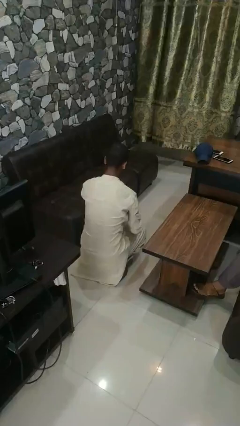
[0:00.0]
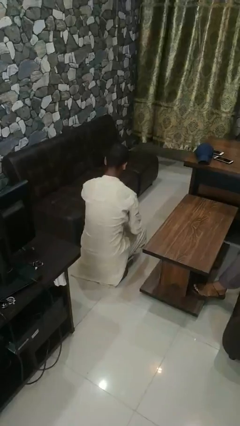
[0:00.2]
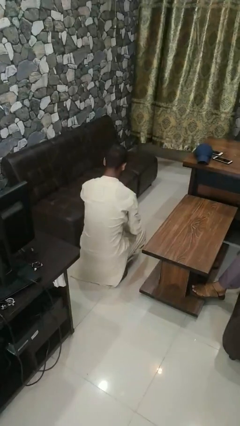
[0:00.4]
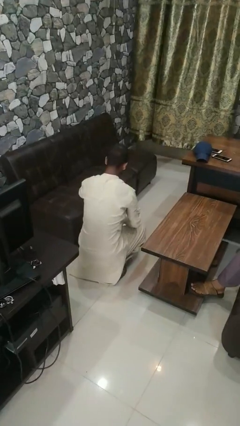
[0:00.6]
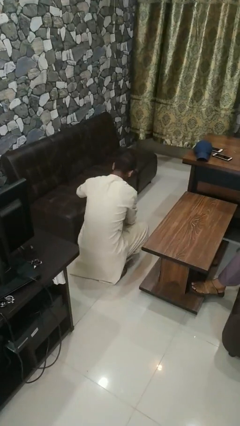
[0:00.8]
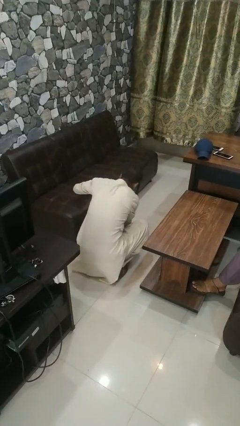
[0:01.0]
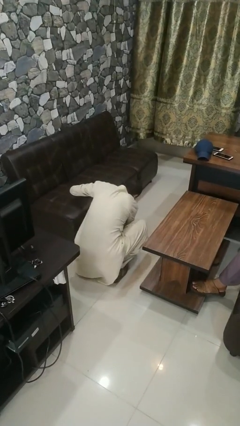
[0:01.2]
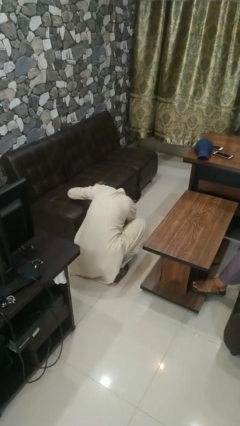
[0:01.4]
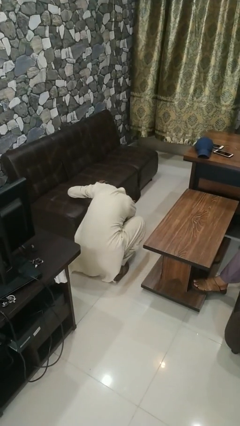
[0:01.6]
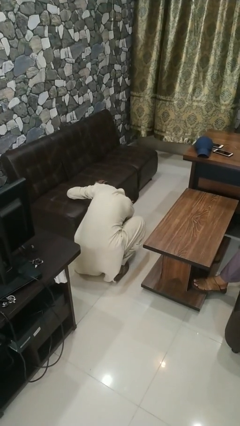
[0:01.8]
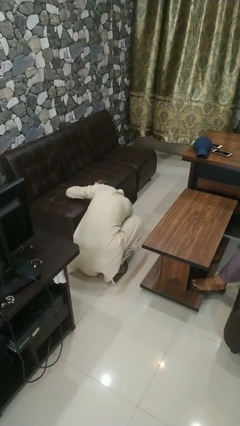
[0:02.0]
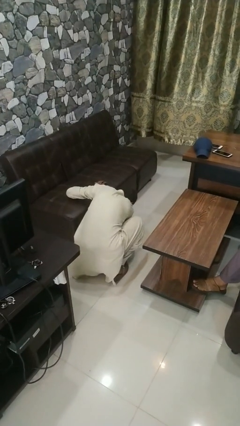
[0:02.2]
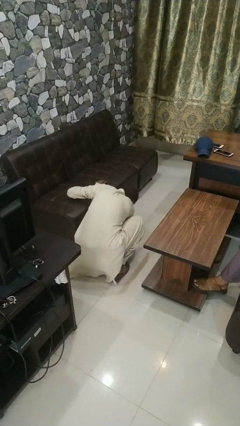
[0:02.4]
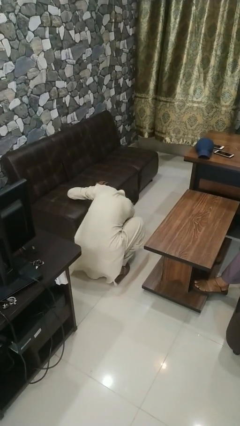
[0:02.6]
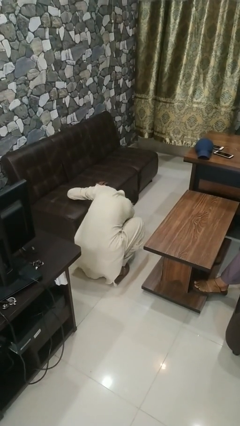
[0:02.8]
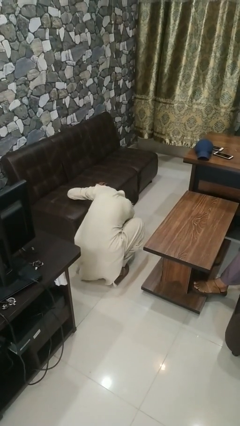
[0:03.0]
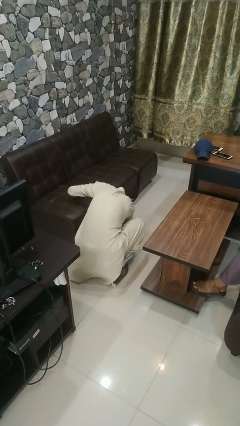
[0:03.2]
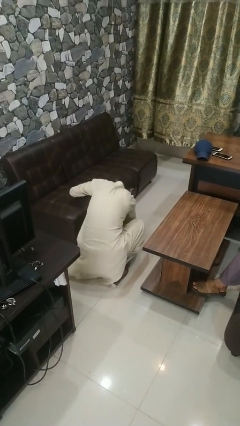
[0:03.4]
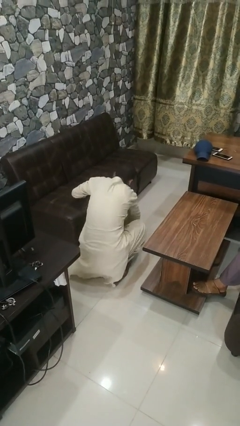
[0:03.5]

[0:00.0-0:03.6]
person searches under couch

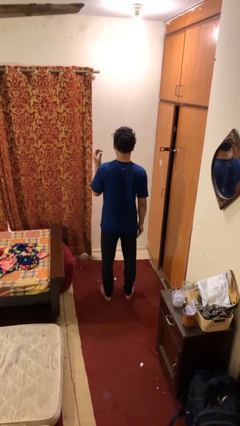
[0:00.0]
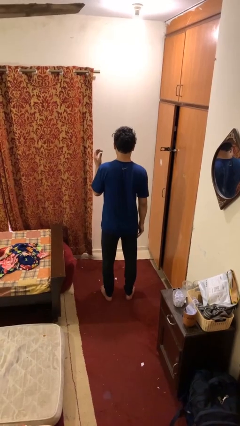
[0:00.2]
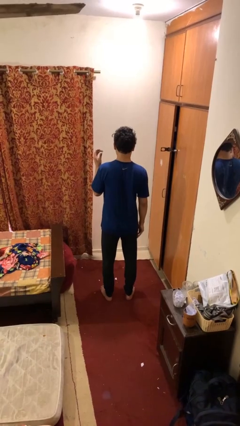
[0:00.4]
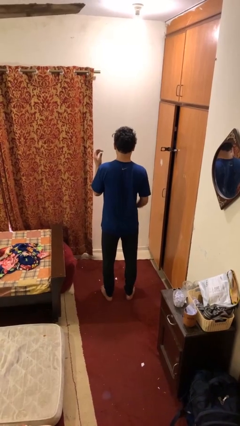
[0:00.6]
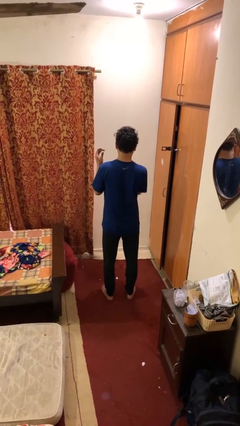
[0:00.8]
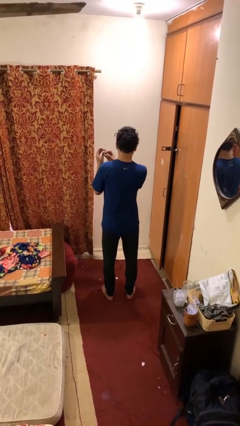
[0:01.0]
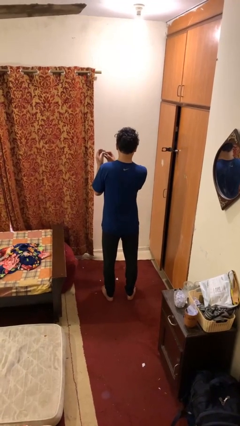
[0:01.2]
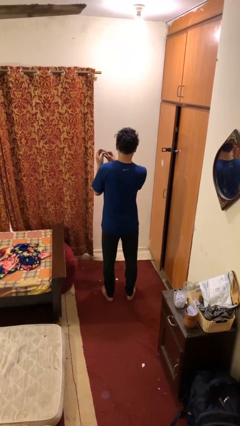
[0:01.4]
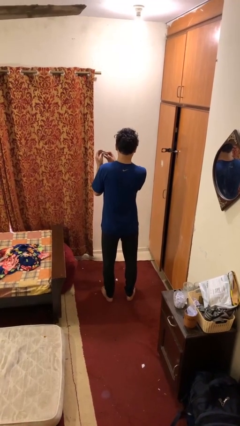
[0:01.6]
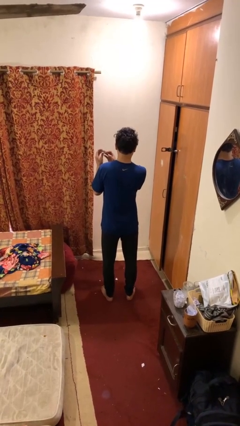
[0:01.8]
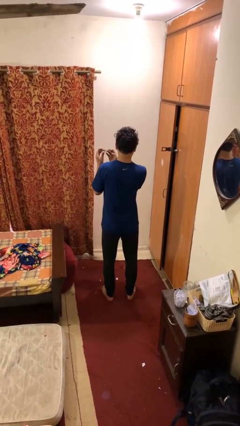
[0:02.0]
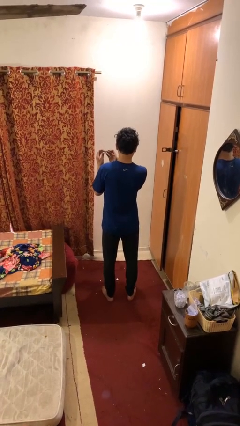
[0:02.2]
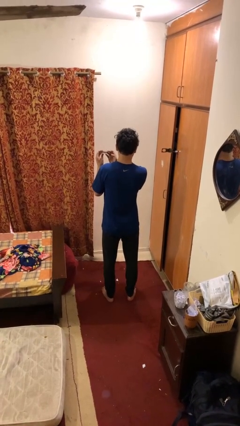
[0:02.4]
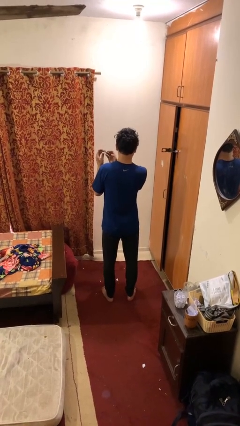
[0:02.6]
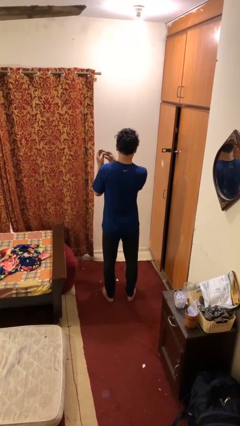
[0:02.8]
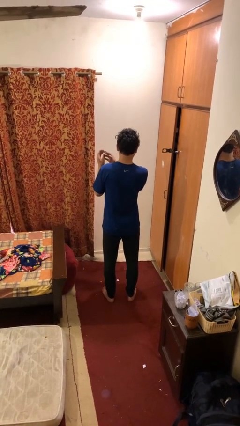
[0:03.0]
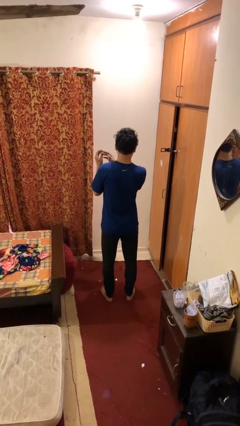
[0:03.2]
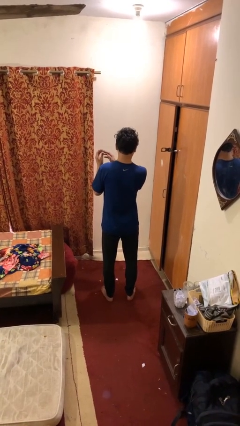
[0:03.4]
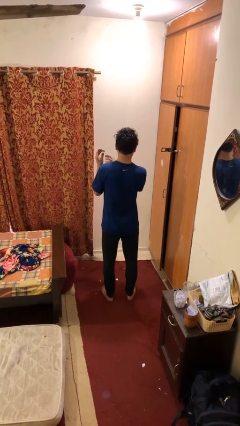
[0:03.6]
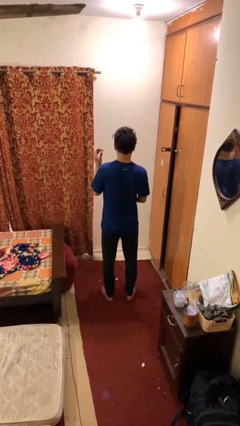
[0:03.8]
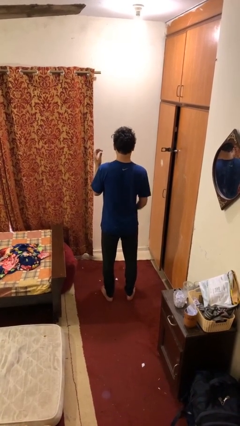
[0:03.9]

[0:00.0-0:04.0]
person clips fingernails

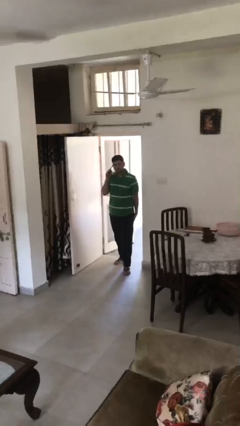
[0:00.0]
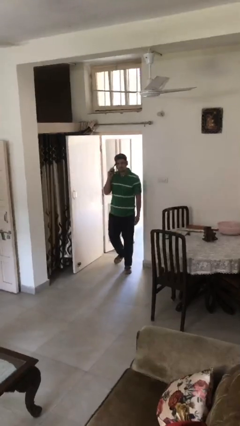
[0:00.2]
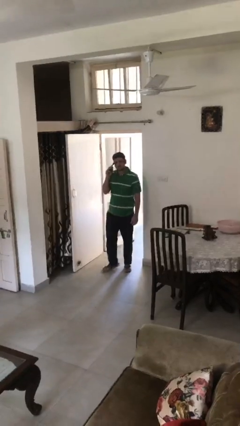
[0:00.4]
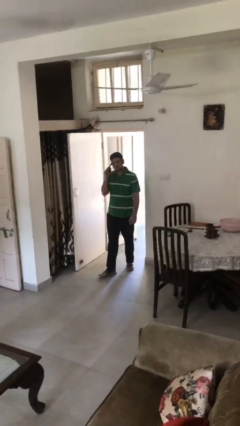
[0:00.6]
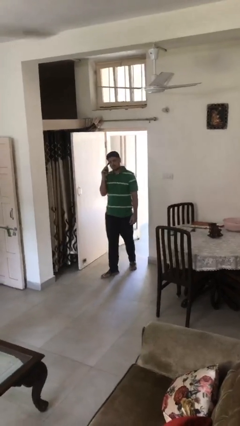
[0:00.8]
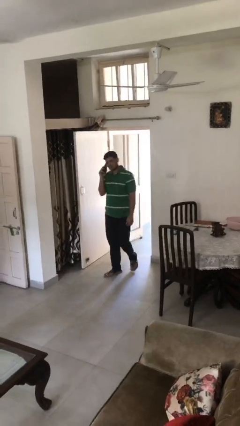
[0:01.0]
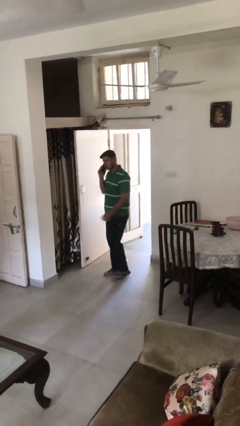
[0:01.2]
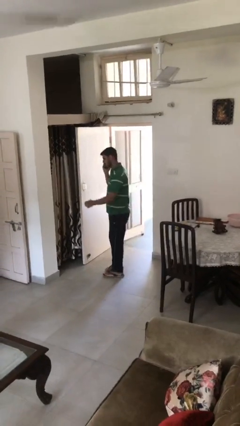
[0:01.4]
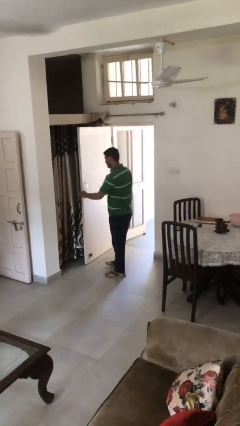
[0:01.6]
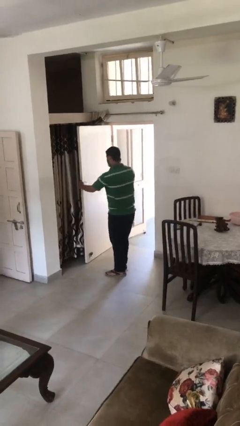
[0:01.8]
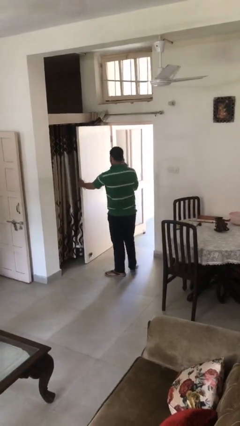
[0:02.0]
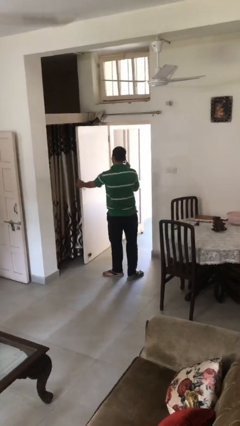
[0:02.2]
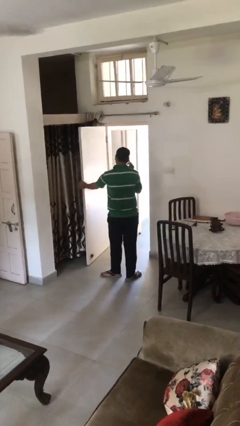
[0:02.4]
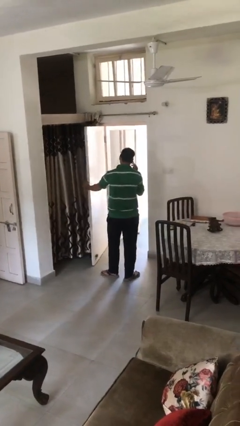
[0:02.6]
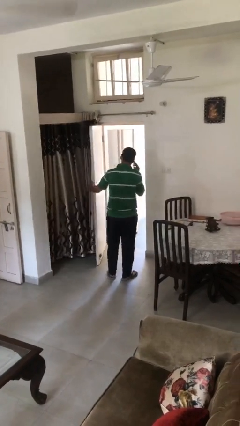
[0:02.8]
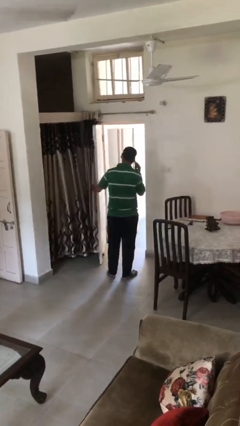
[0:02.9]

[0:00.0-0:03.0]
person enters scene through structure

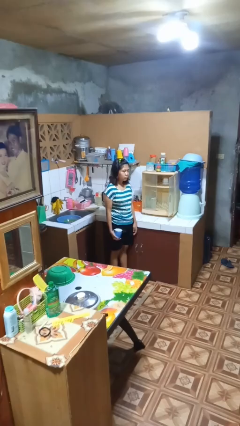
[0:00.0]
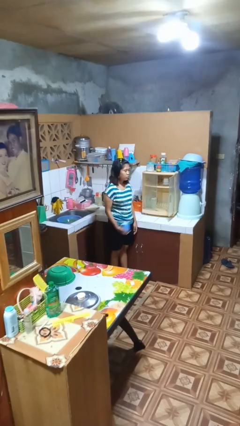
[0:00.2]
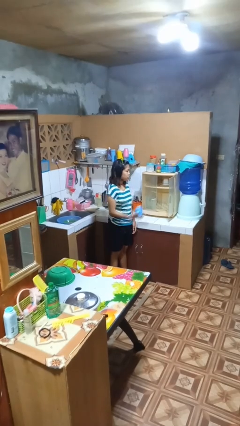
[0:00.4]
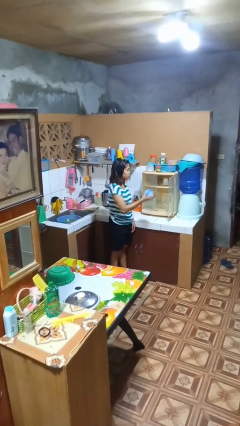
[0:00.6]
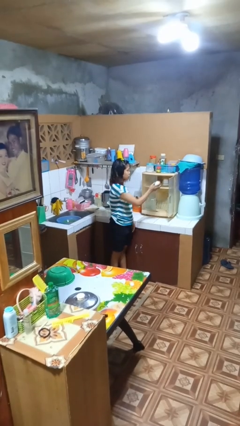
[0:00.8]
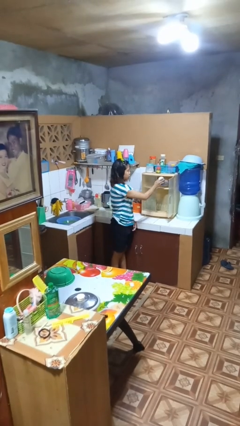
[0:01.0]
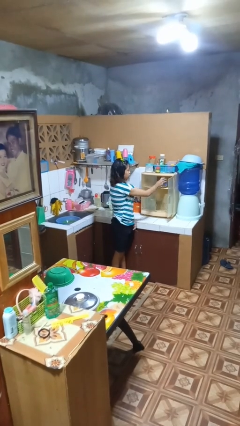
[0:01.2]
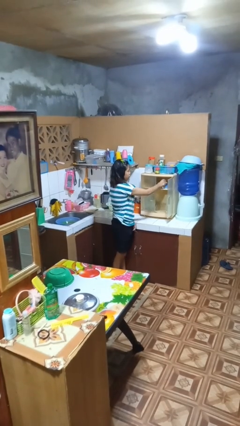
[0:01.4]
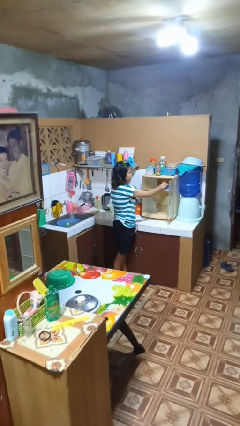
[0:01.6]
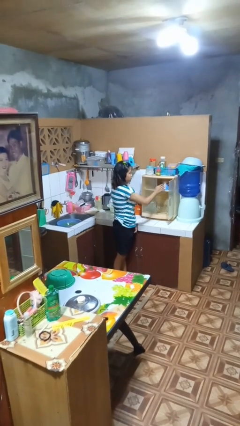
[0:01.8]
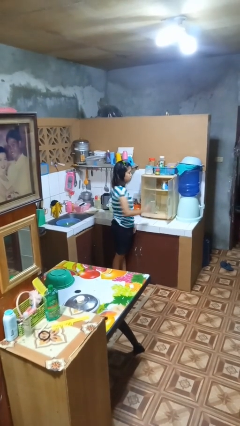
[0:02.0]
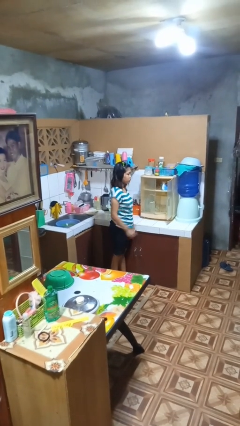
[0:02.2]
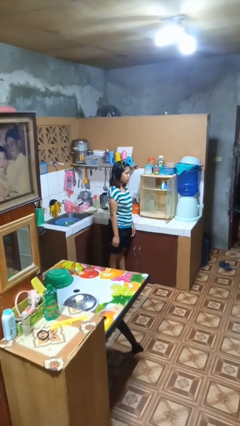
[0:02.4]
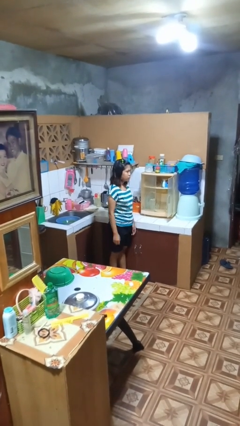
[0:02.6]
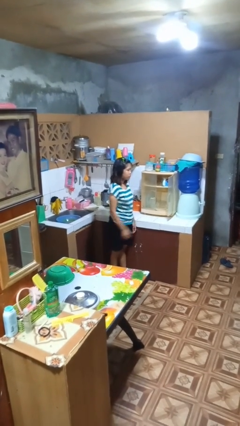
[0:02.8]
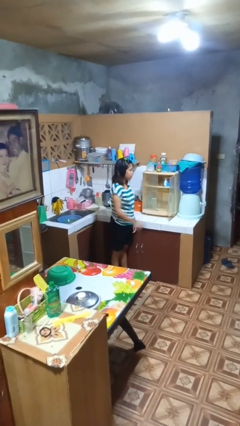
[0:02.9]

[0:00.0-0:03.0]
person puts object in cabinet

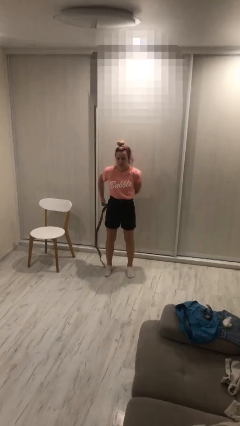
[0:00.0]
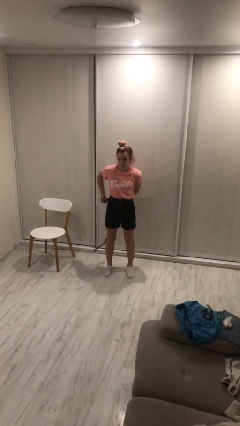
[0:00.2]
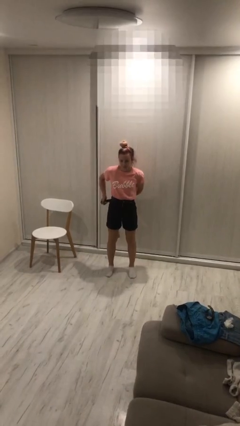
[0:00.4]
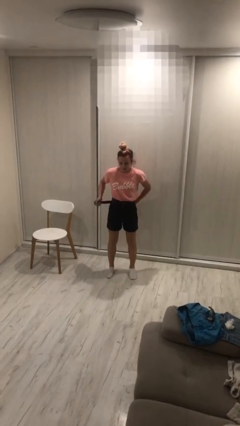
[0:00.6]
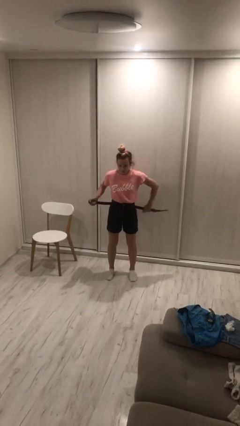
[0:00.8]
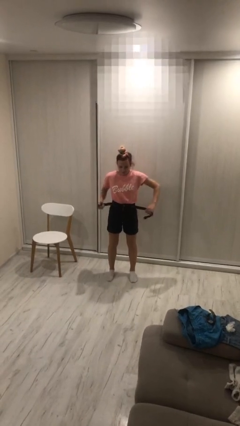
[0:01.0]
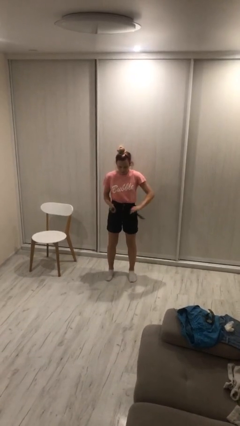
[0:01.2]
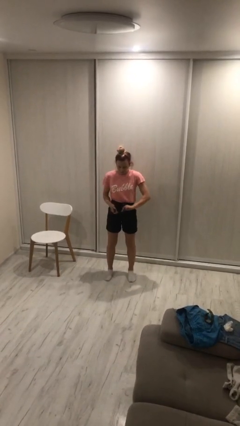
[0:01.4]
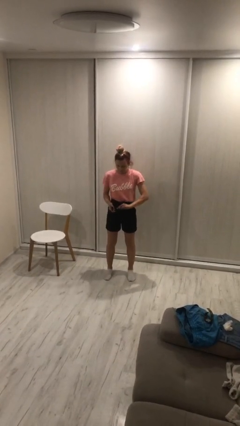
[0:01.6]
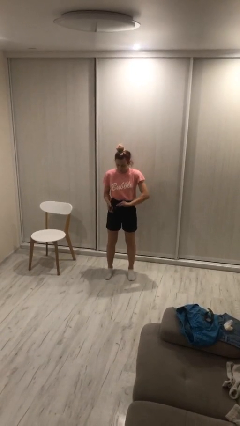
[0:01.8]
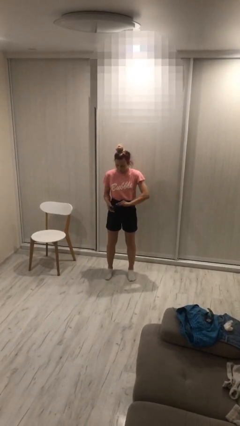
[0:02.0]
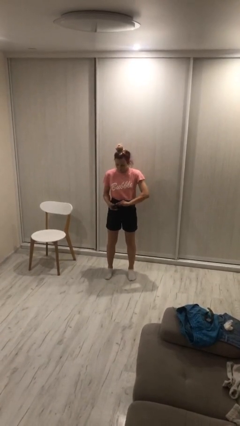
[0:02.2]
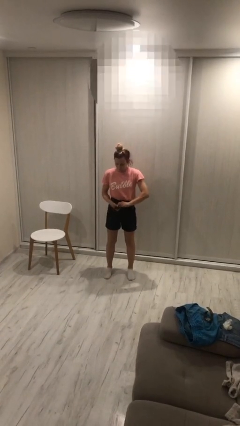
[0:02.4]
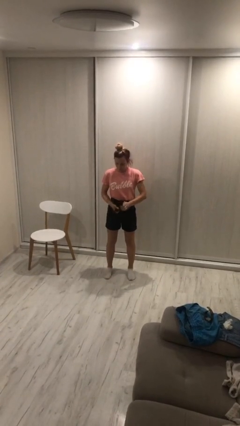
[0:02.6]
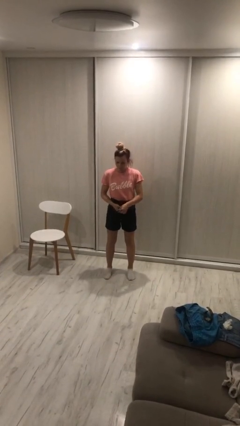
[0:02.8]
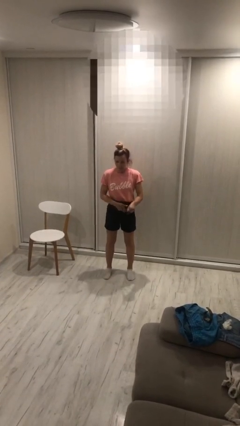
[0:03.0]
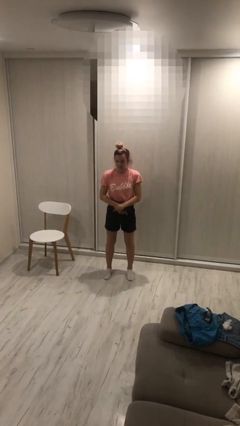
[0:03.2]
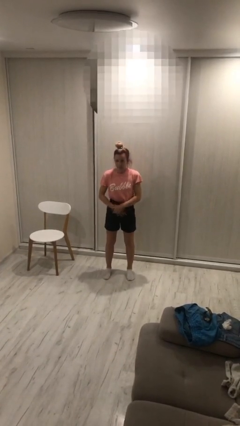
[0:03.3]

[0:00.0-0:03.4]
person puts on belt

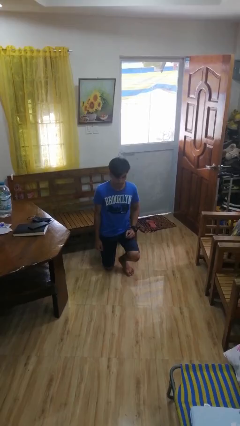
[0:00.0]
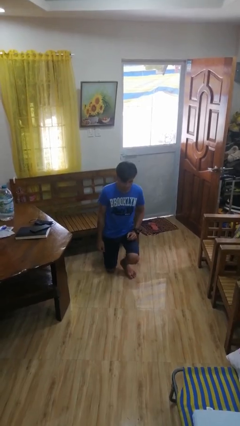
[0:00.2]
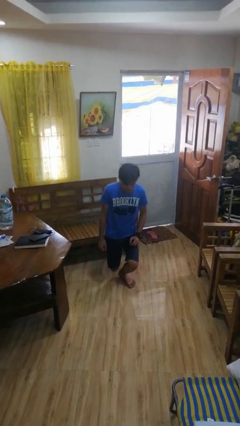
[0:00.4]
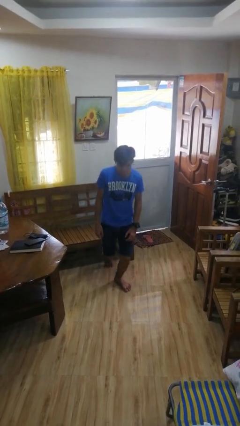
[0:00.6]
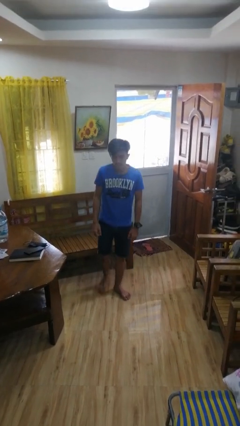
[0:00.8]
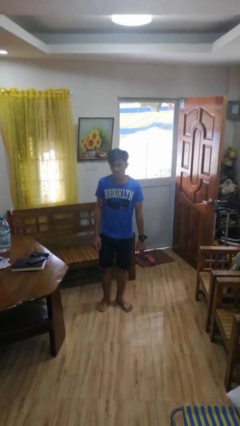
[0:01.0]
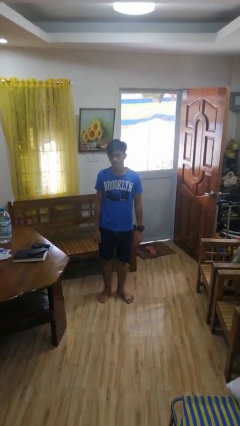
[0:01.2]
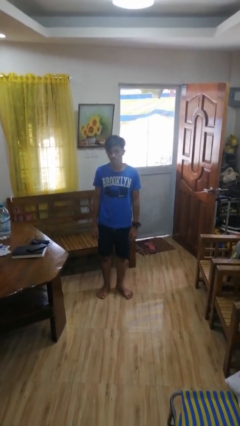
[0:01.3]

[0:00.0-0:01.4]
person stands up from floor
